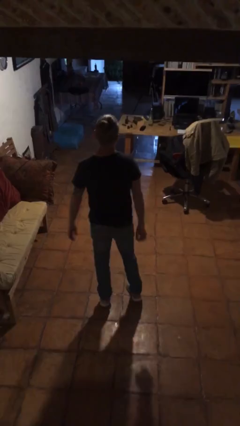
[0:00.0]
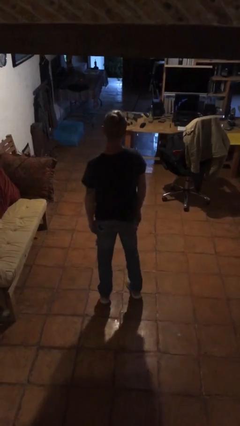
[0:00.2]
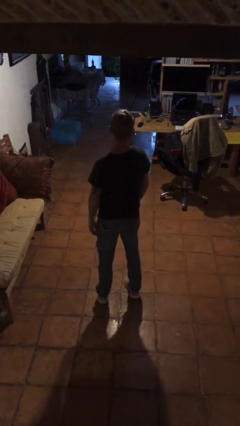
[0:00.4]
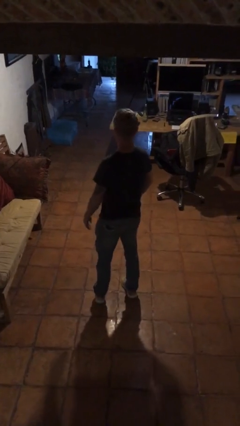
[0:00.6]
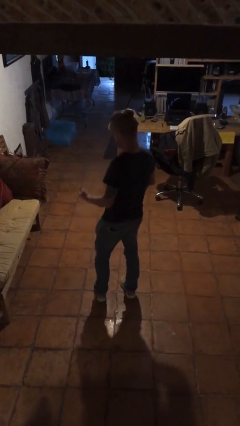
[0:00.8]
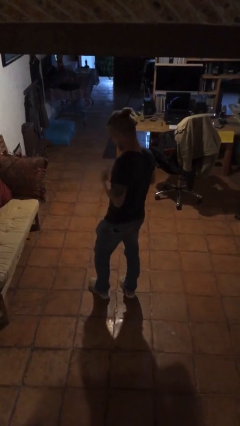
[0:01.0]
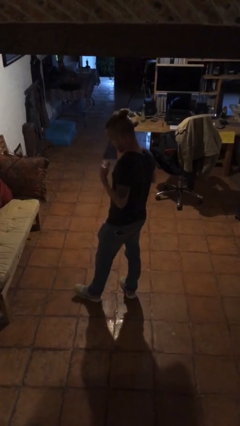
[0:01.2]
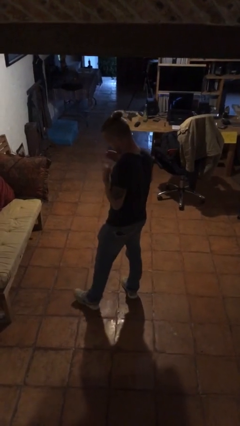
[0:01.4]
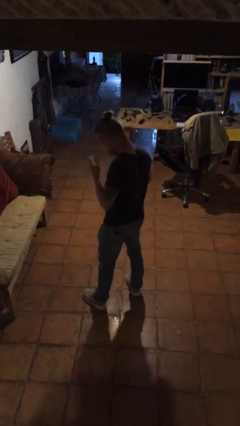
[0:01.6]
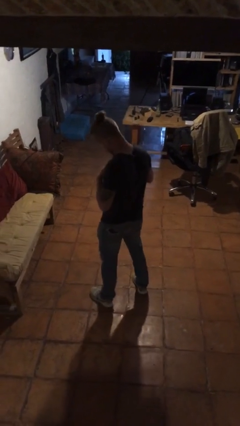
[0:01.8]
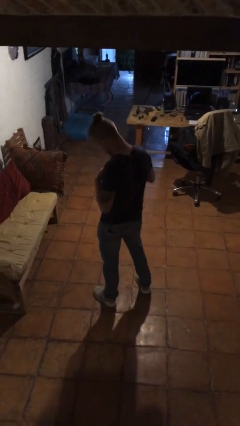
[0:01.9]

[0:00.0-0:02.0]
person drums on chest

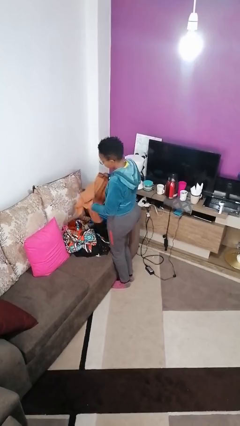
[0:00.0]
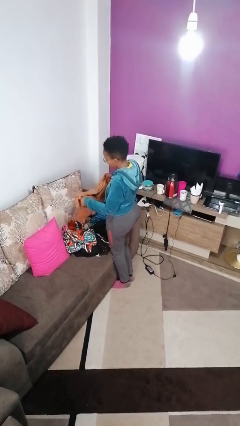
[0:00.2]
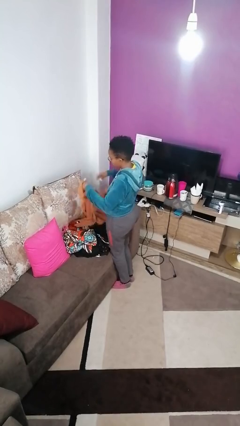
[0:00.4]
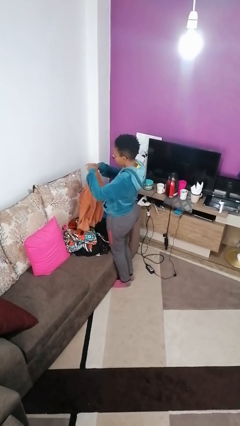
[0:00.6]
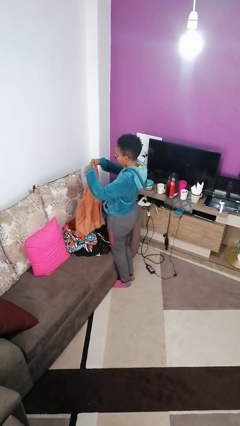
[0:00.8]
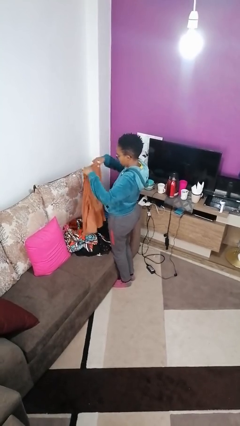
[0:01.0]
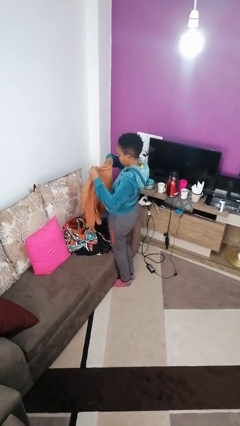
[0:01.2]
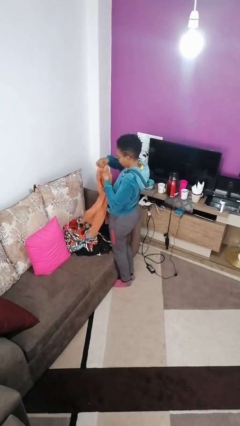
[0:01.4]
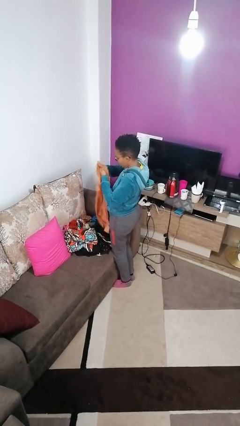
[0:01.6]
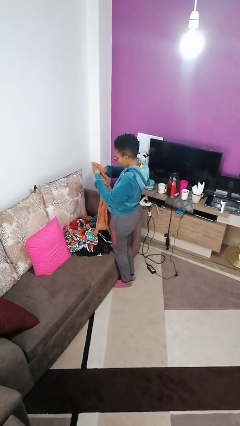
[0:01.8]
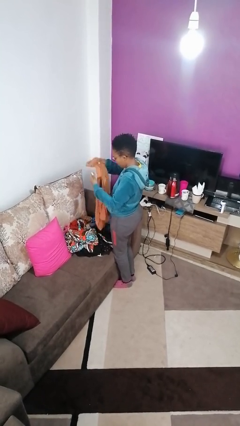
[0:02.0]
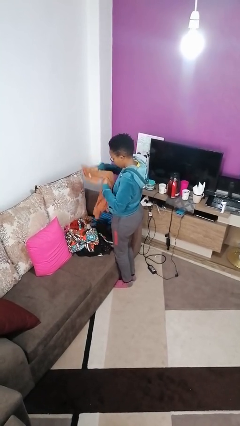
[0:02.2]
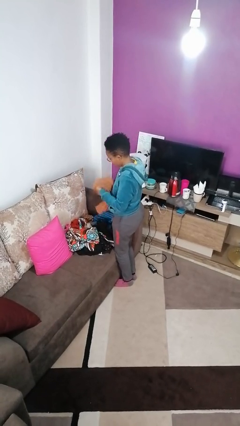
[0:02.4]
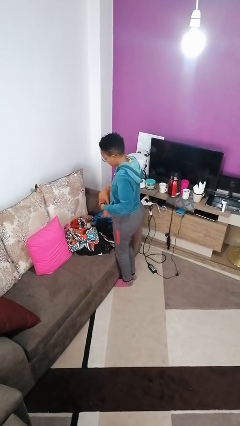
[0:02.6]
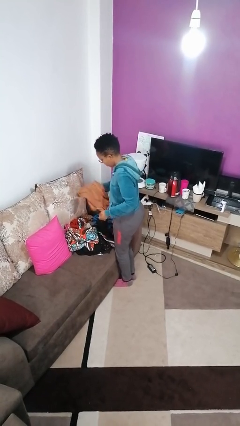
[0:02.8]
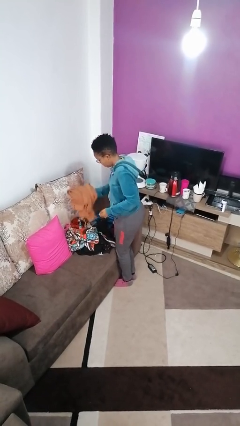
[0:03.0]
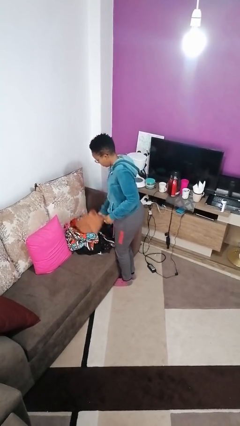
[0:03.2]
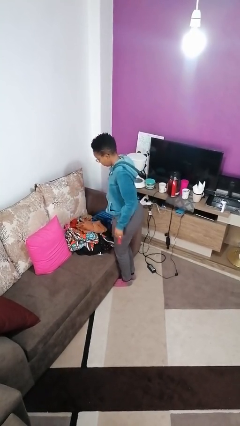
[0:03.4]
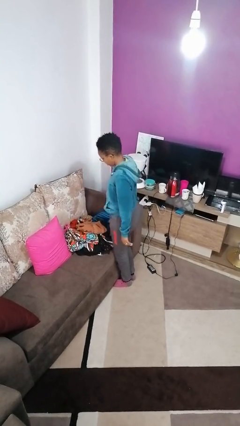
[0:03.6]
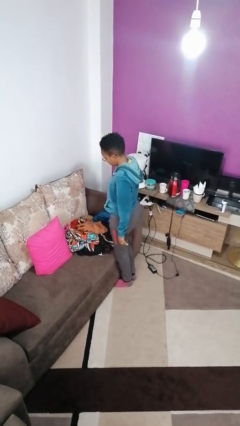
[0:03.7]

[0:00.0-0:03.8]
person folds shirt

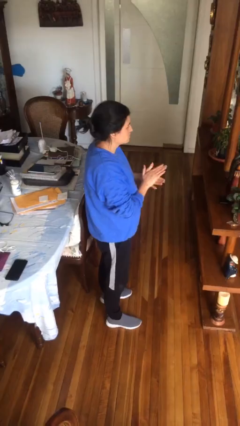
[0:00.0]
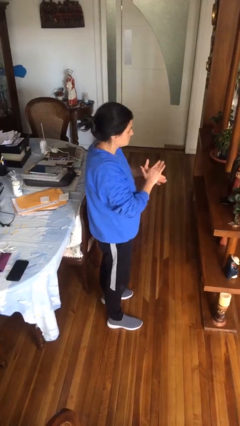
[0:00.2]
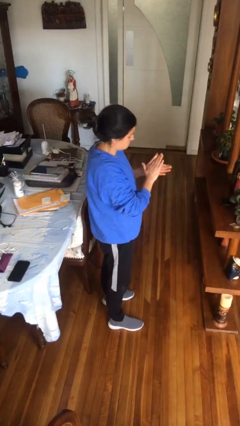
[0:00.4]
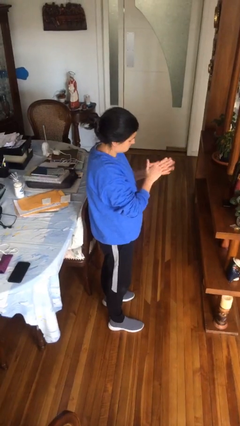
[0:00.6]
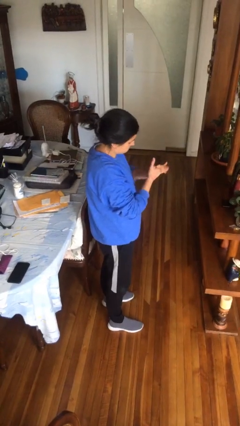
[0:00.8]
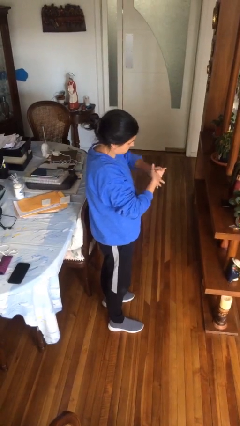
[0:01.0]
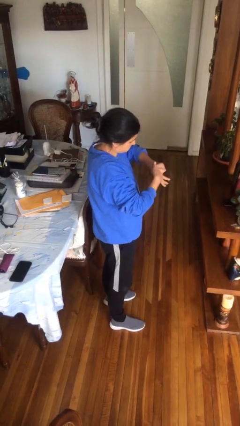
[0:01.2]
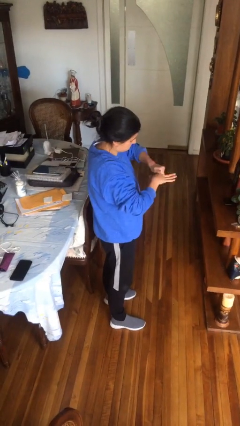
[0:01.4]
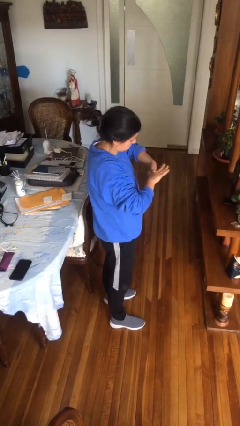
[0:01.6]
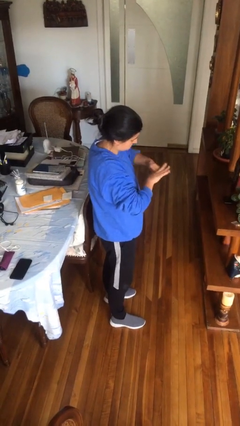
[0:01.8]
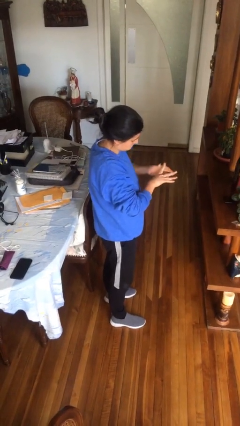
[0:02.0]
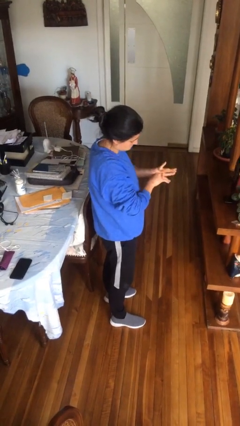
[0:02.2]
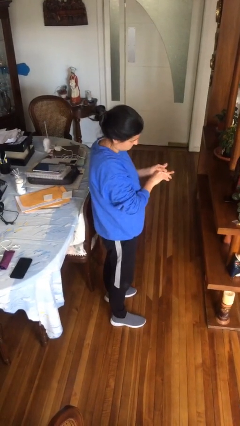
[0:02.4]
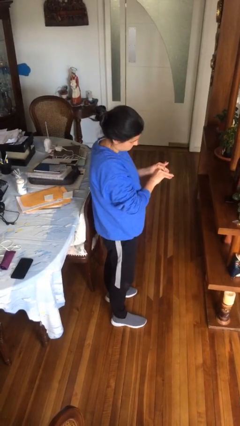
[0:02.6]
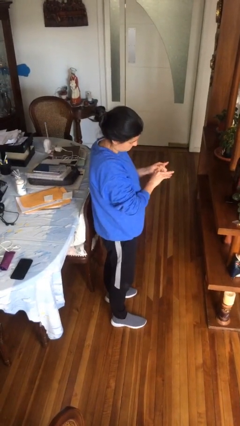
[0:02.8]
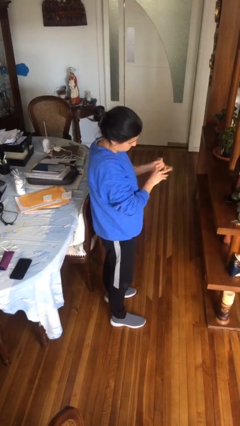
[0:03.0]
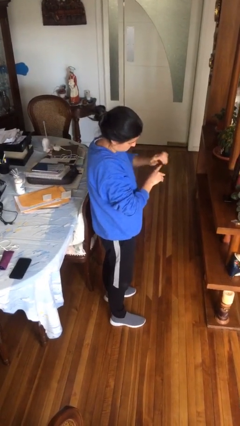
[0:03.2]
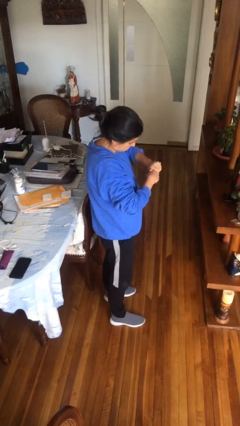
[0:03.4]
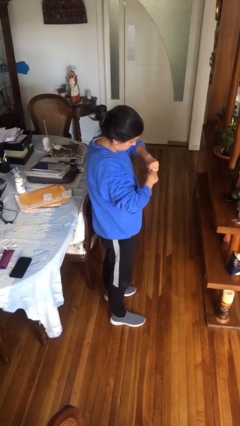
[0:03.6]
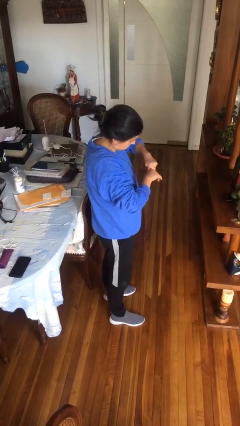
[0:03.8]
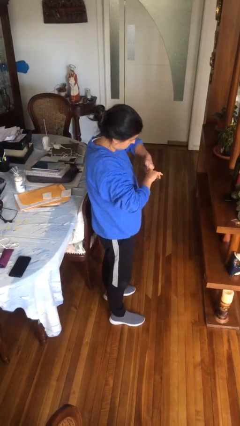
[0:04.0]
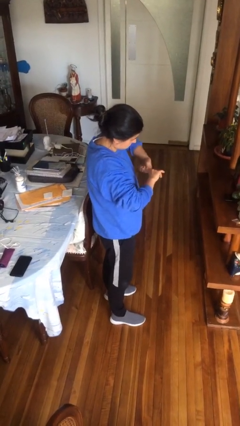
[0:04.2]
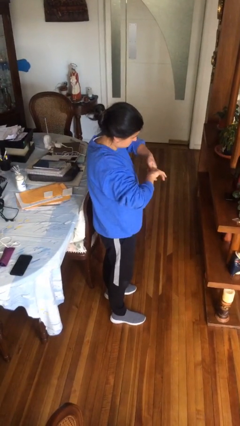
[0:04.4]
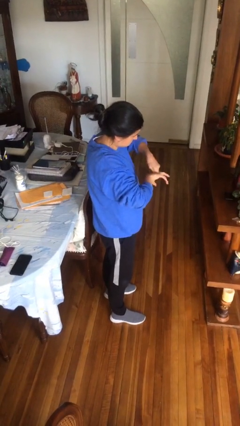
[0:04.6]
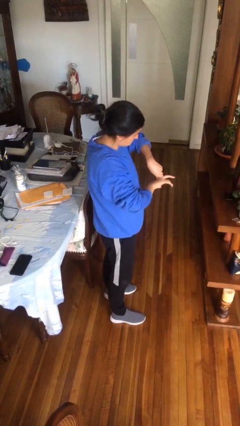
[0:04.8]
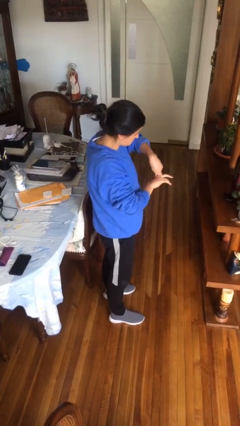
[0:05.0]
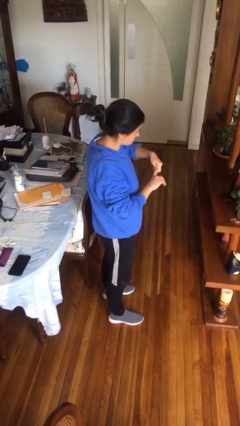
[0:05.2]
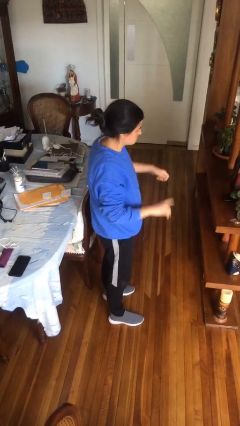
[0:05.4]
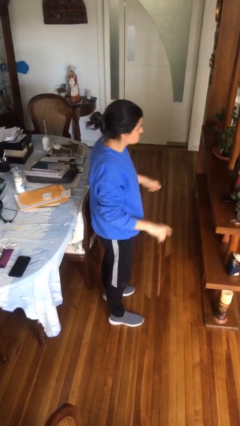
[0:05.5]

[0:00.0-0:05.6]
person cracks knuckles

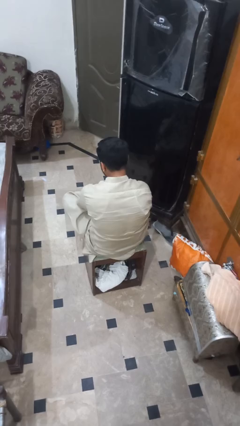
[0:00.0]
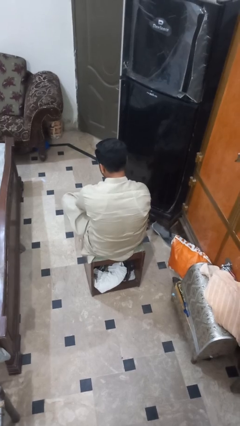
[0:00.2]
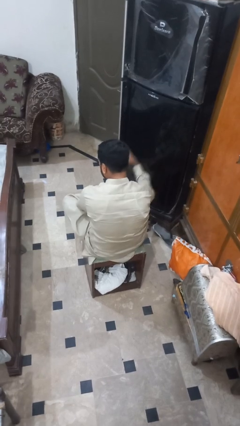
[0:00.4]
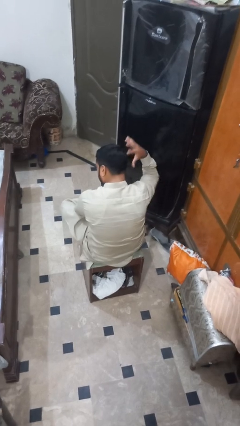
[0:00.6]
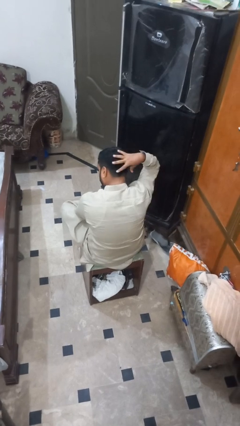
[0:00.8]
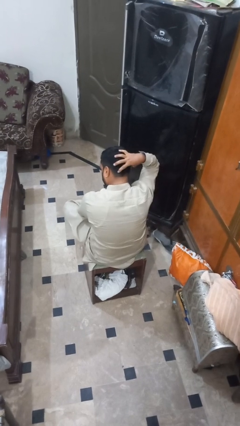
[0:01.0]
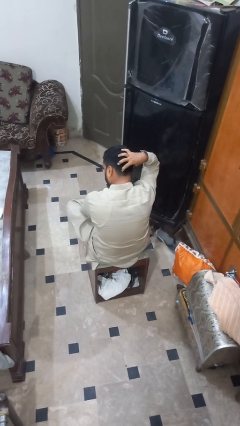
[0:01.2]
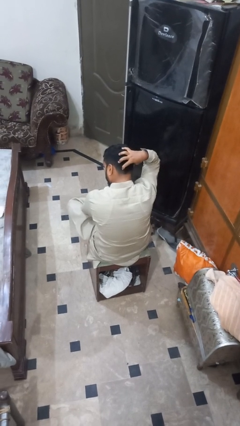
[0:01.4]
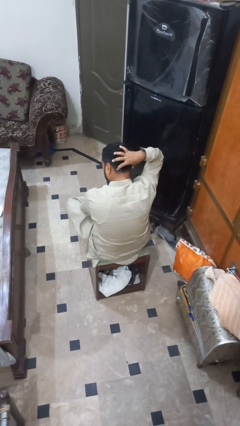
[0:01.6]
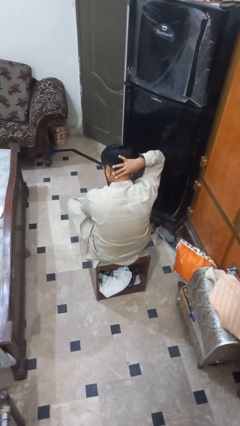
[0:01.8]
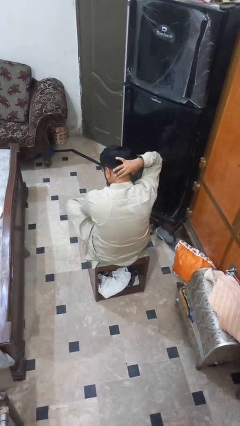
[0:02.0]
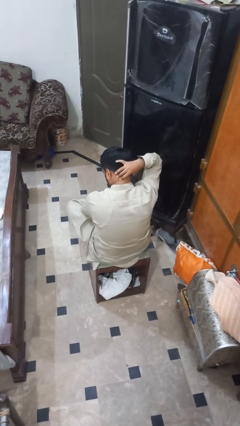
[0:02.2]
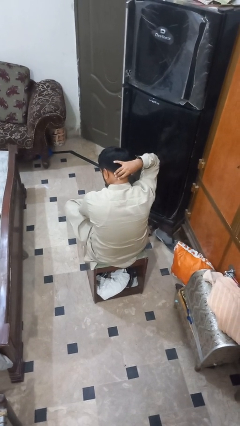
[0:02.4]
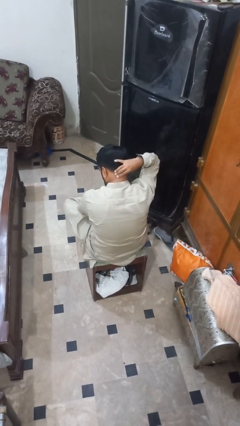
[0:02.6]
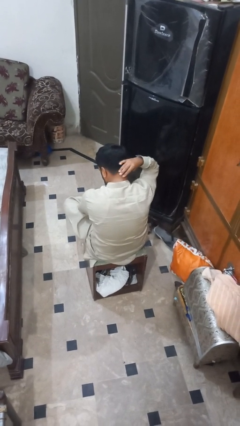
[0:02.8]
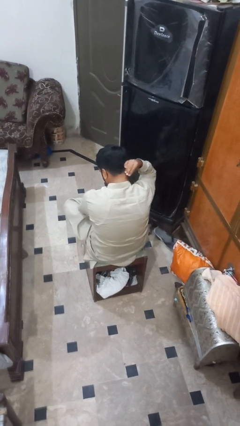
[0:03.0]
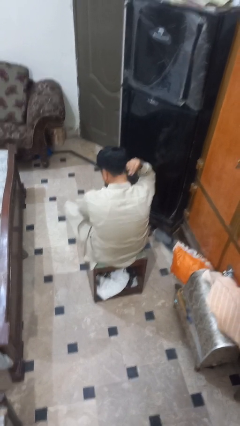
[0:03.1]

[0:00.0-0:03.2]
person strokes hair

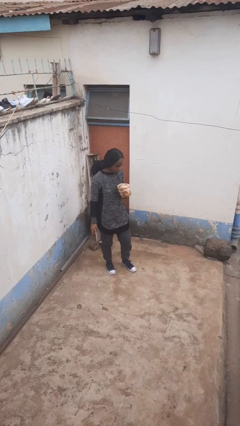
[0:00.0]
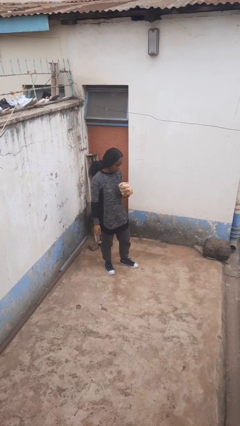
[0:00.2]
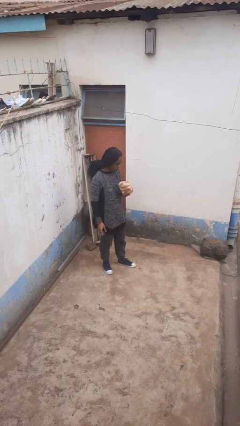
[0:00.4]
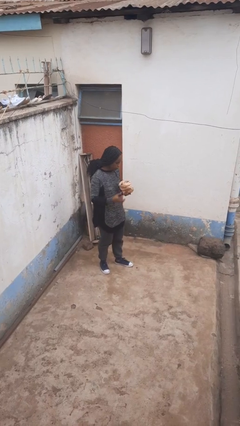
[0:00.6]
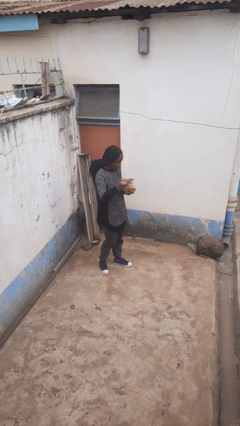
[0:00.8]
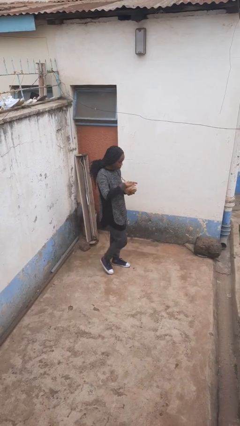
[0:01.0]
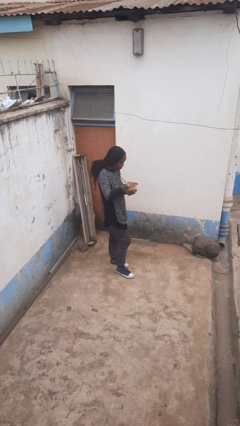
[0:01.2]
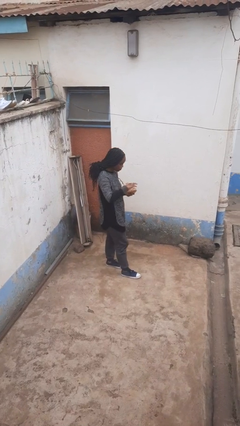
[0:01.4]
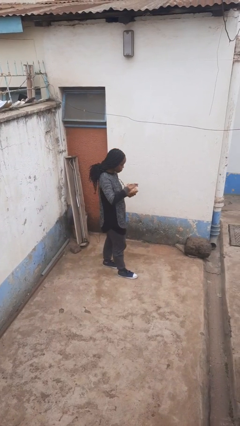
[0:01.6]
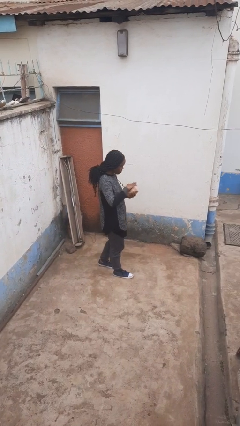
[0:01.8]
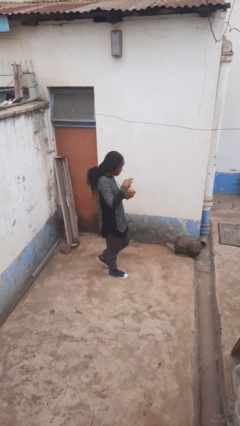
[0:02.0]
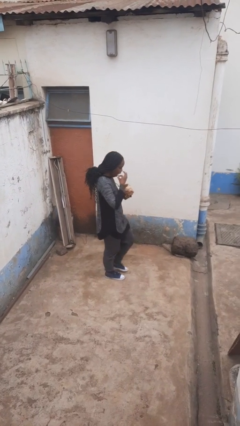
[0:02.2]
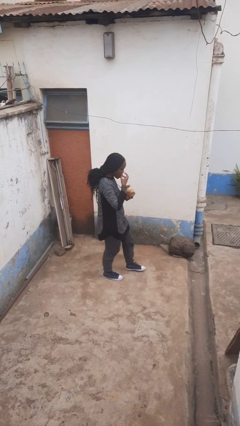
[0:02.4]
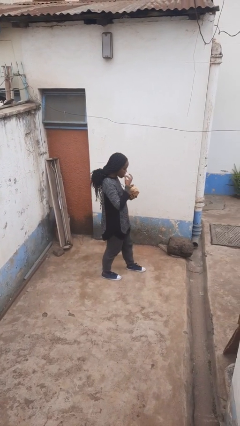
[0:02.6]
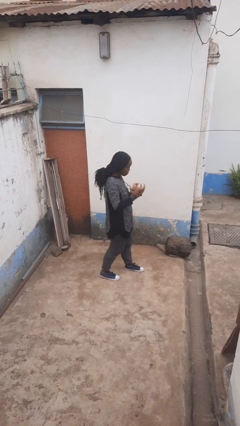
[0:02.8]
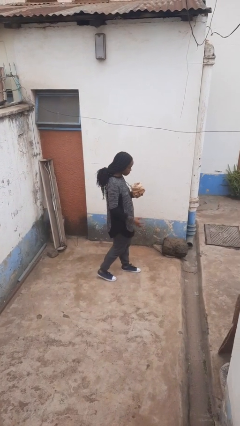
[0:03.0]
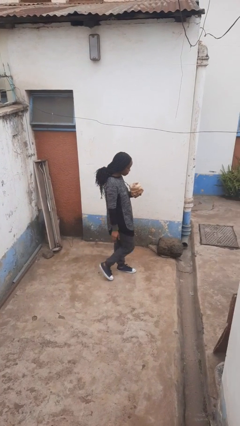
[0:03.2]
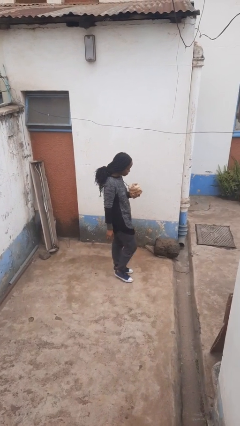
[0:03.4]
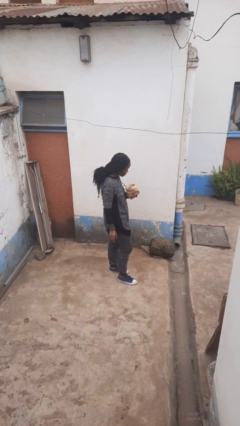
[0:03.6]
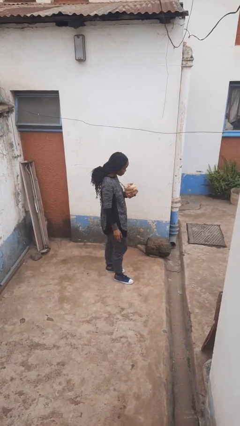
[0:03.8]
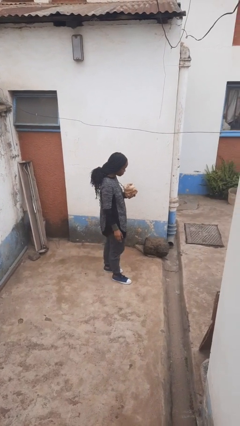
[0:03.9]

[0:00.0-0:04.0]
person eats snack from bag
